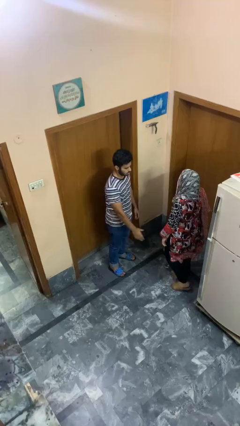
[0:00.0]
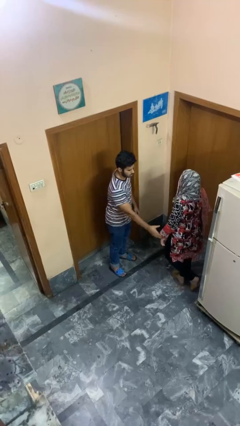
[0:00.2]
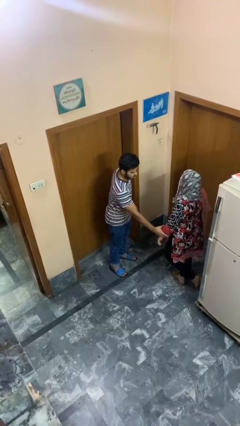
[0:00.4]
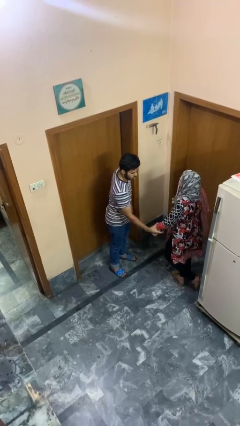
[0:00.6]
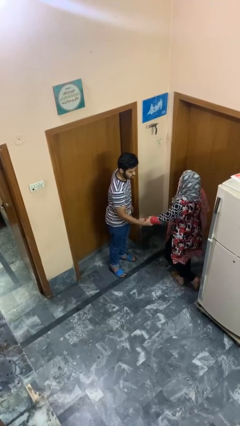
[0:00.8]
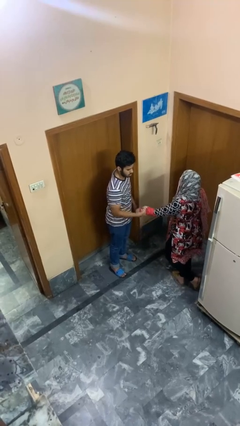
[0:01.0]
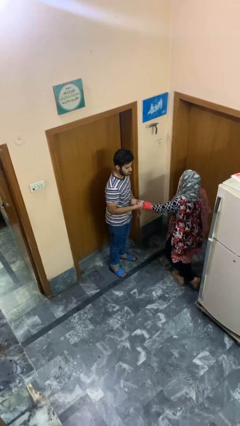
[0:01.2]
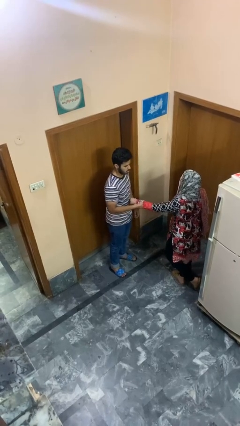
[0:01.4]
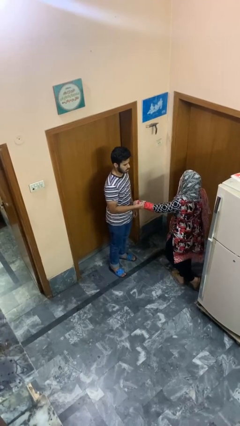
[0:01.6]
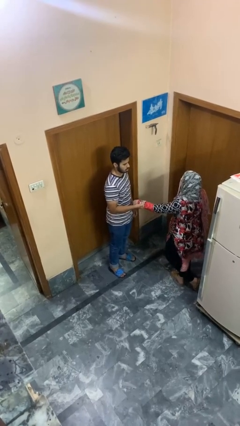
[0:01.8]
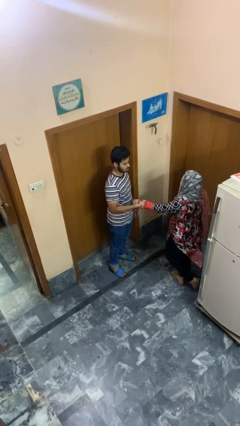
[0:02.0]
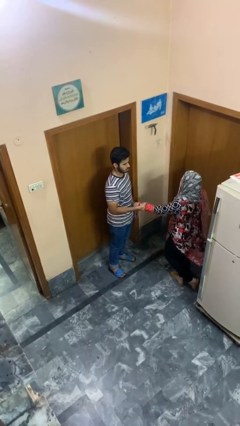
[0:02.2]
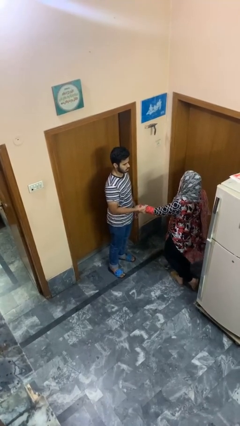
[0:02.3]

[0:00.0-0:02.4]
person grabs person by forearm

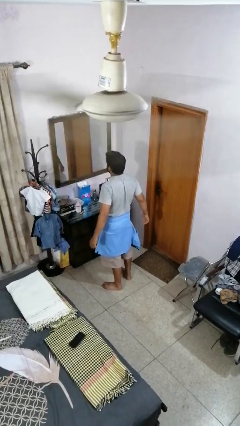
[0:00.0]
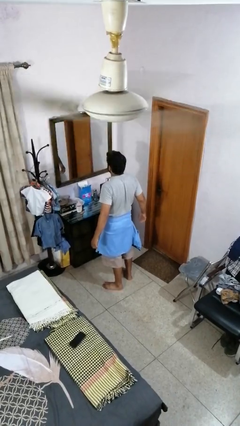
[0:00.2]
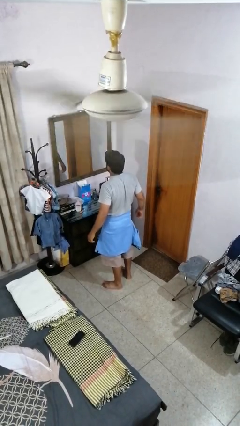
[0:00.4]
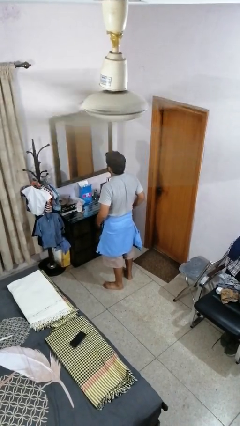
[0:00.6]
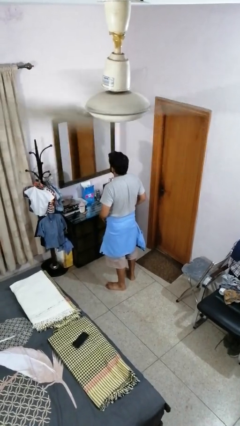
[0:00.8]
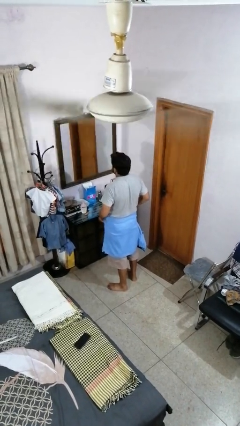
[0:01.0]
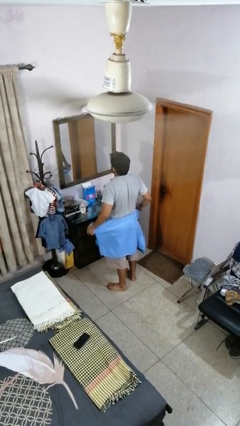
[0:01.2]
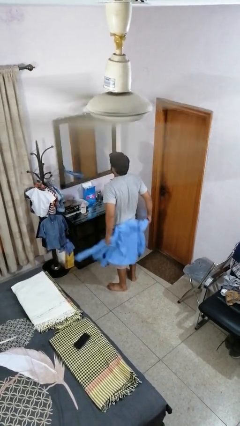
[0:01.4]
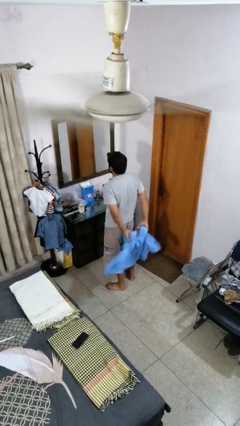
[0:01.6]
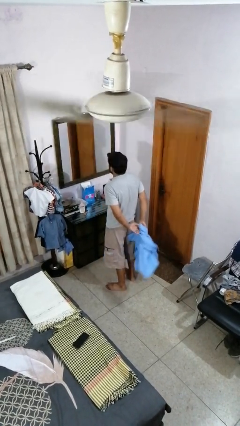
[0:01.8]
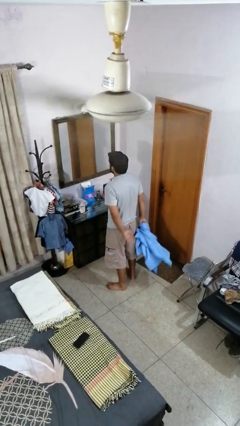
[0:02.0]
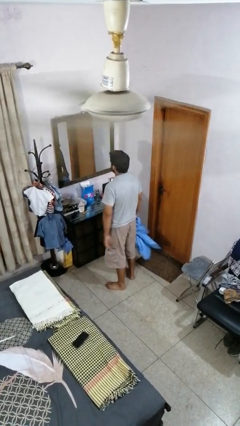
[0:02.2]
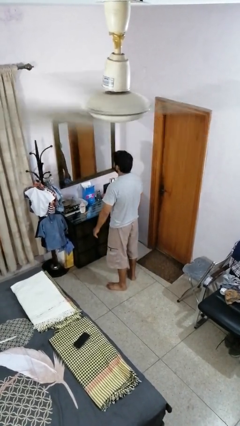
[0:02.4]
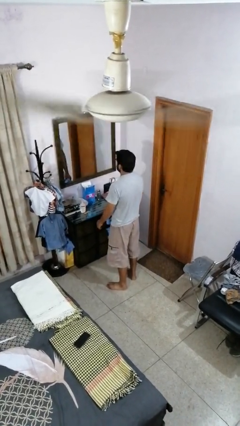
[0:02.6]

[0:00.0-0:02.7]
person unties jacket around waist

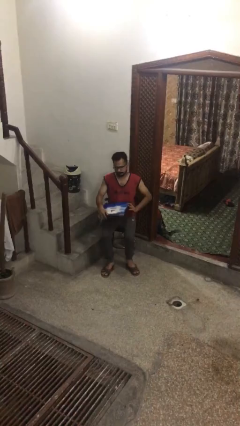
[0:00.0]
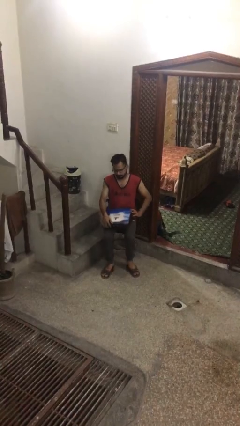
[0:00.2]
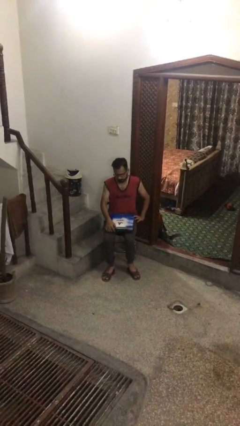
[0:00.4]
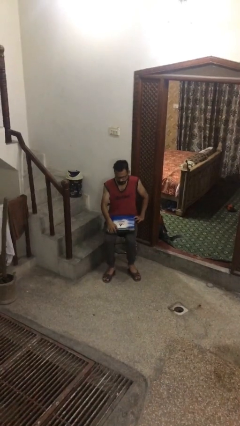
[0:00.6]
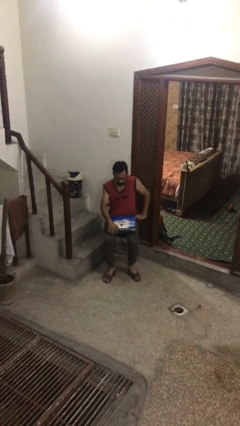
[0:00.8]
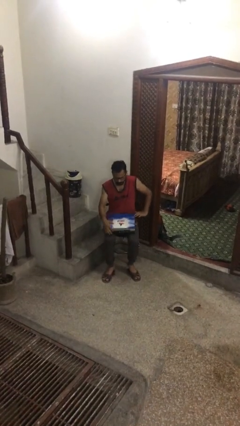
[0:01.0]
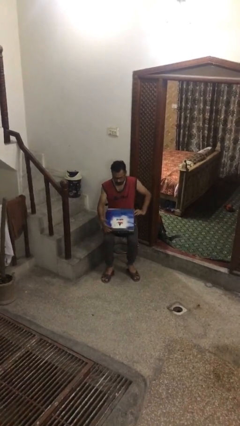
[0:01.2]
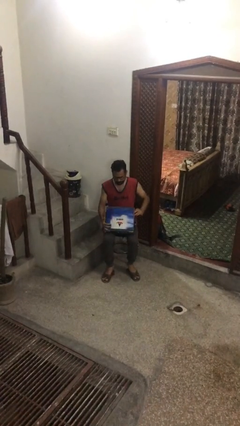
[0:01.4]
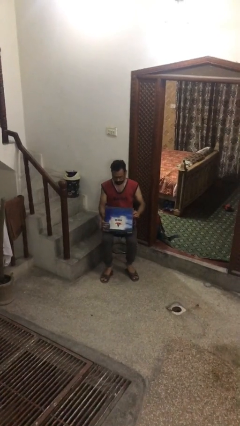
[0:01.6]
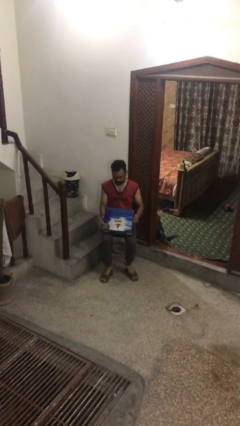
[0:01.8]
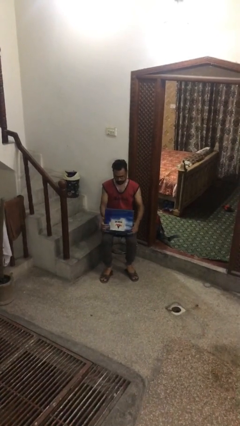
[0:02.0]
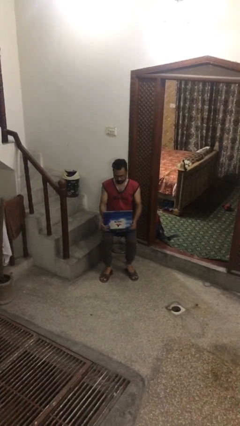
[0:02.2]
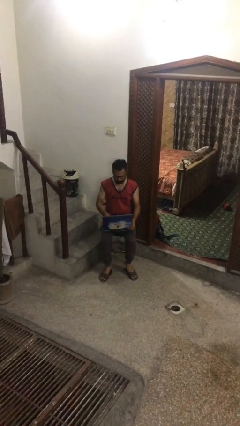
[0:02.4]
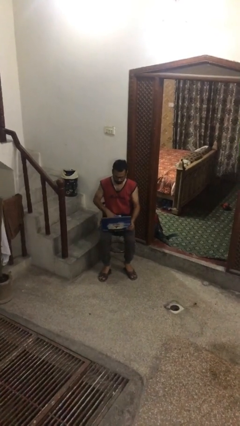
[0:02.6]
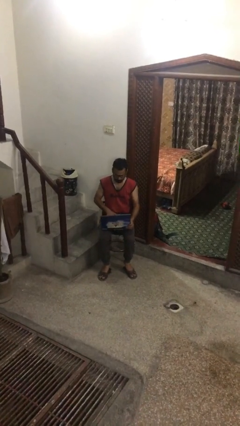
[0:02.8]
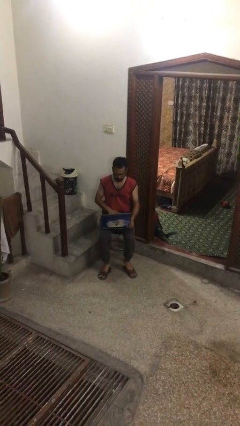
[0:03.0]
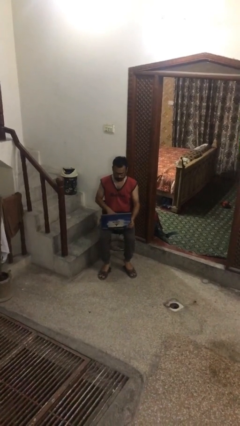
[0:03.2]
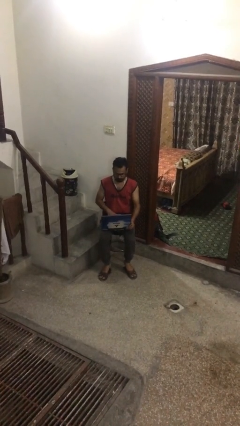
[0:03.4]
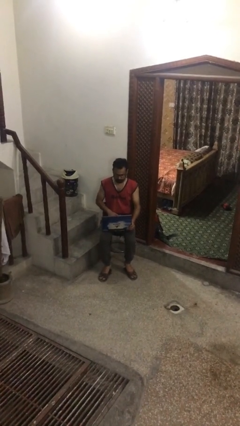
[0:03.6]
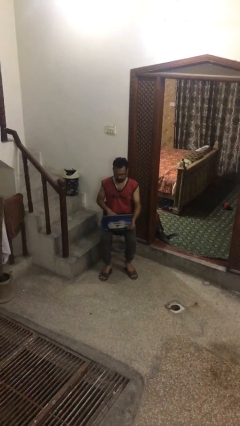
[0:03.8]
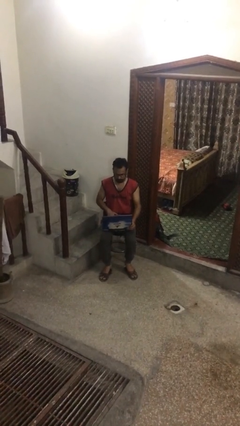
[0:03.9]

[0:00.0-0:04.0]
person interacts with laptop

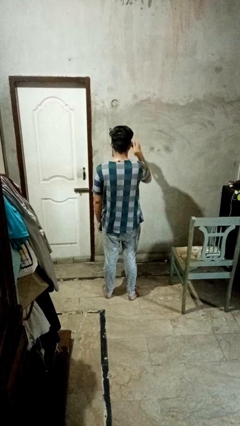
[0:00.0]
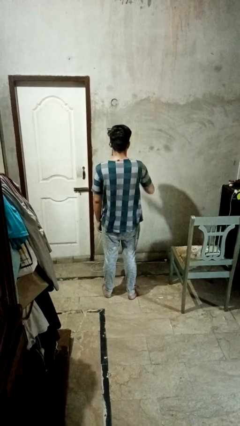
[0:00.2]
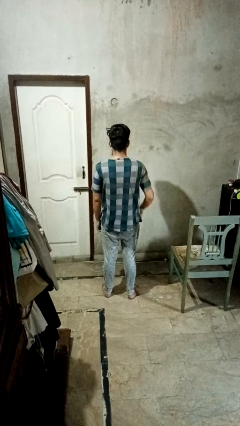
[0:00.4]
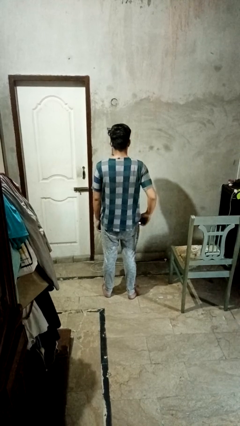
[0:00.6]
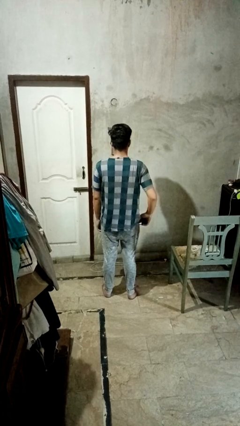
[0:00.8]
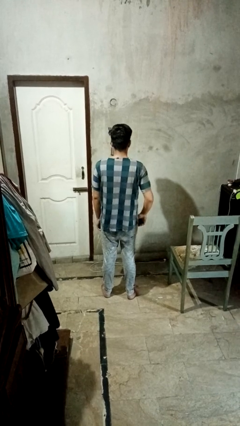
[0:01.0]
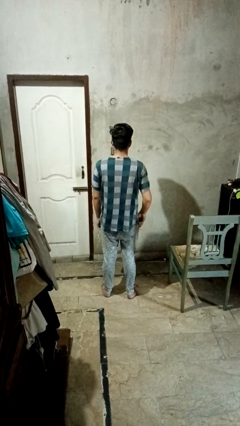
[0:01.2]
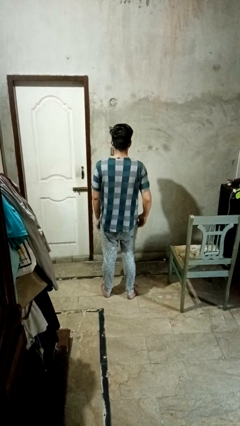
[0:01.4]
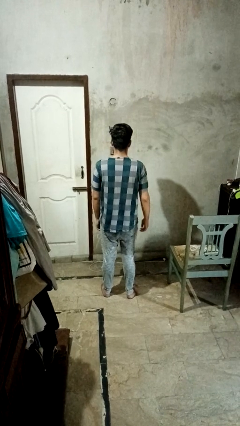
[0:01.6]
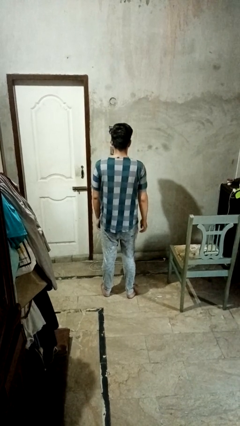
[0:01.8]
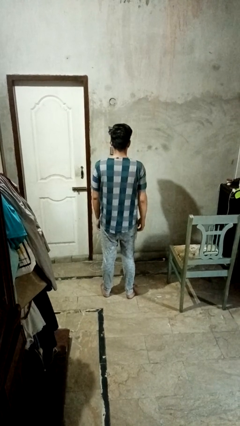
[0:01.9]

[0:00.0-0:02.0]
person puts phone into pocket

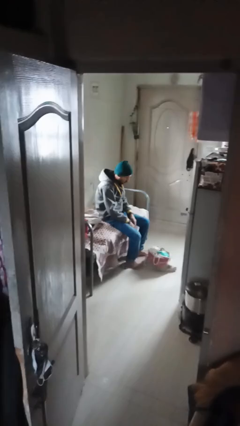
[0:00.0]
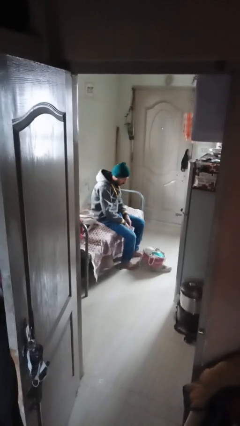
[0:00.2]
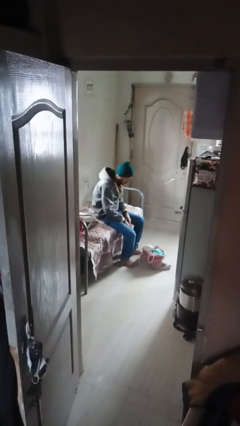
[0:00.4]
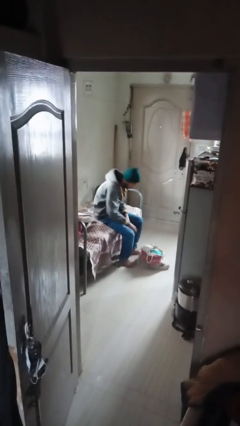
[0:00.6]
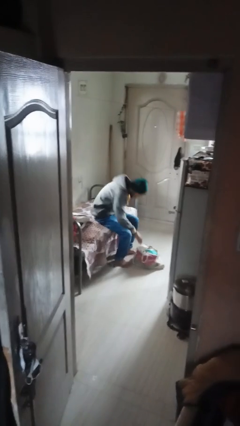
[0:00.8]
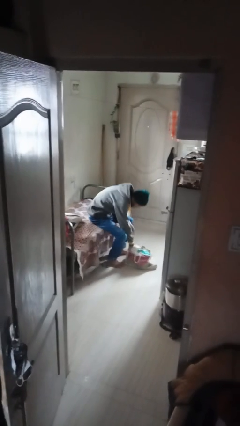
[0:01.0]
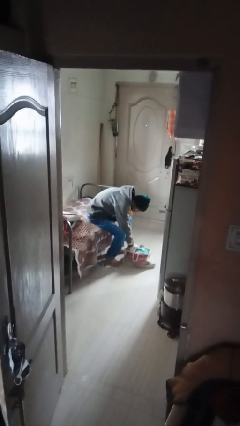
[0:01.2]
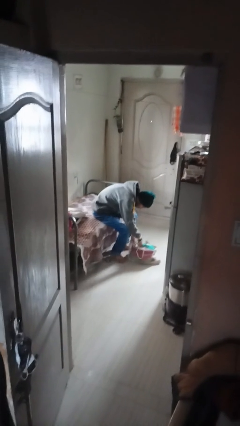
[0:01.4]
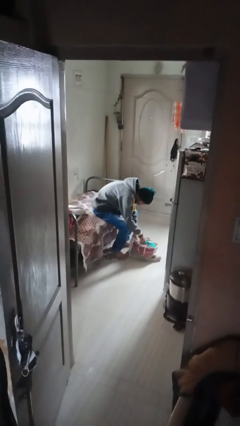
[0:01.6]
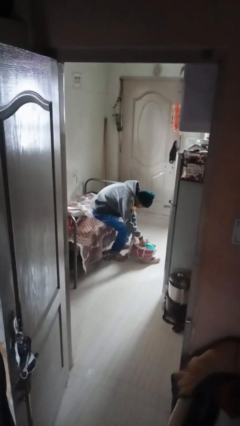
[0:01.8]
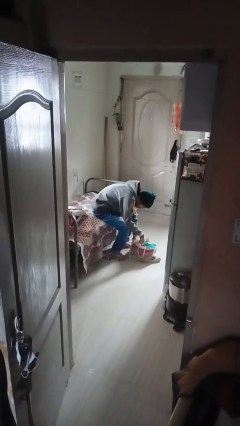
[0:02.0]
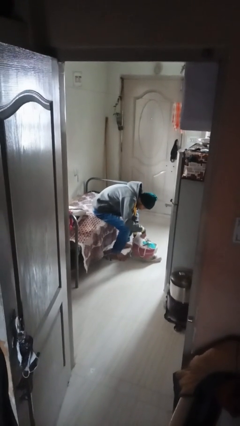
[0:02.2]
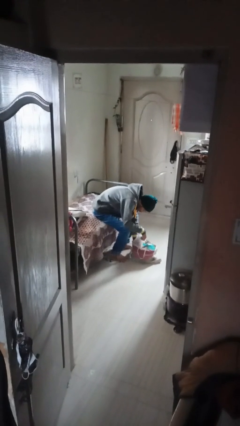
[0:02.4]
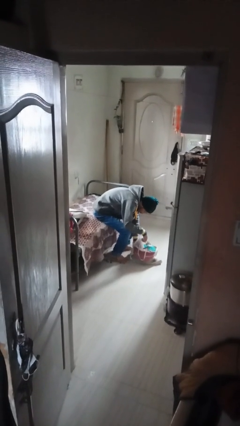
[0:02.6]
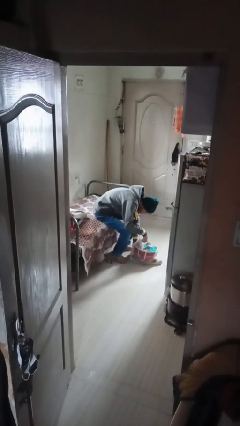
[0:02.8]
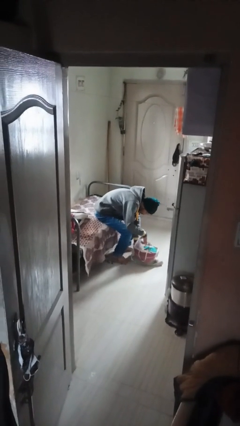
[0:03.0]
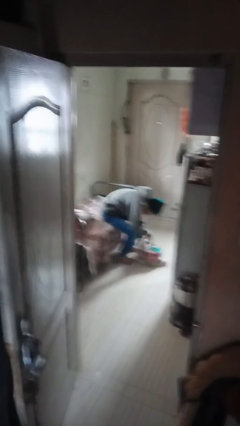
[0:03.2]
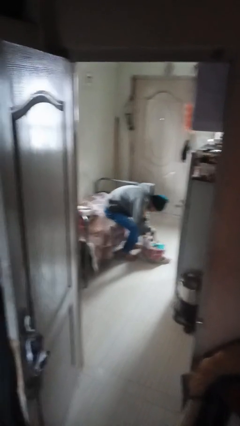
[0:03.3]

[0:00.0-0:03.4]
person searches in bag

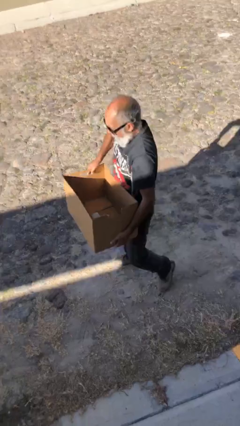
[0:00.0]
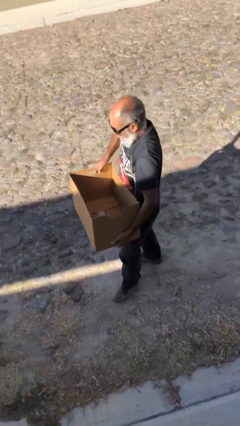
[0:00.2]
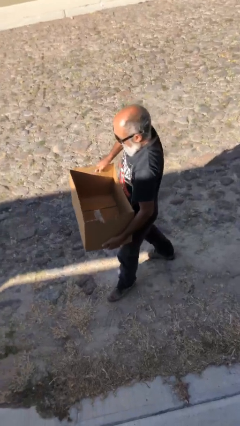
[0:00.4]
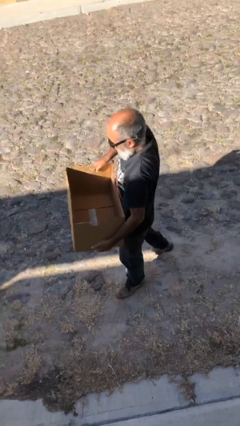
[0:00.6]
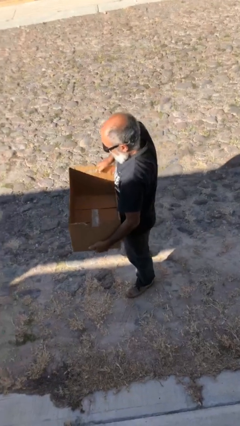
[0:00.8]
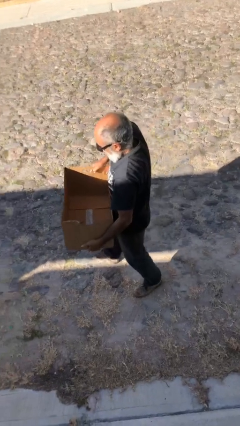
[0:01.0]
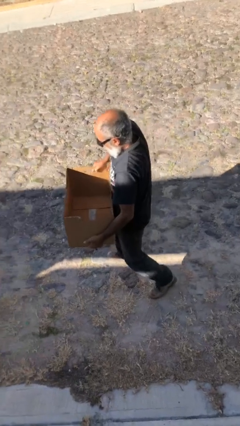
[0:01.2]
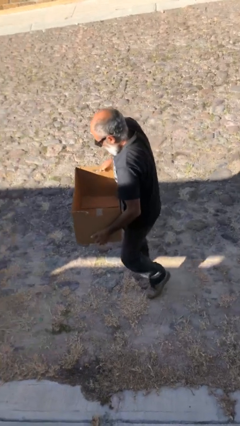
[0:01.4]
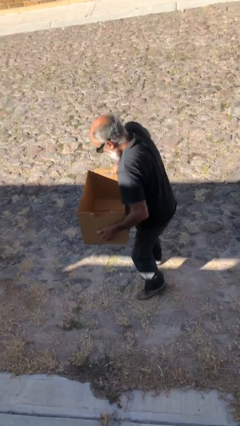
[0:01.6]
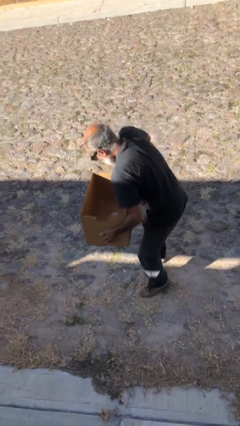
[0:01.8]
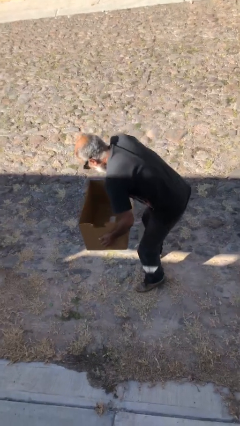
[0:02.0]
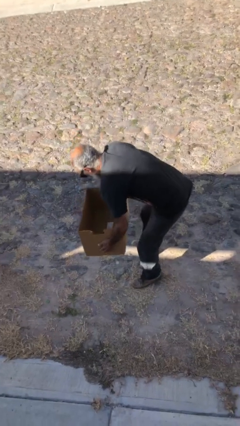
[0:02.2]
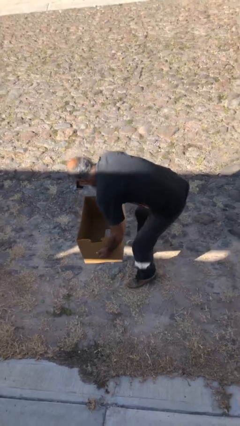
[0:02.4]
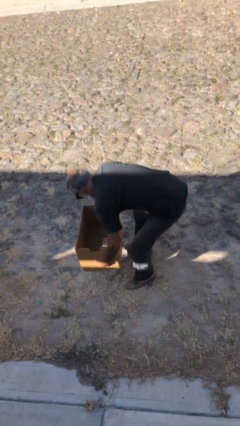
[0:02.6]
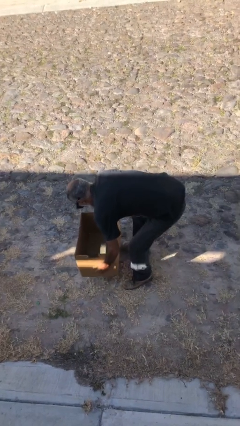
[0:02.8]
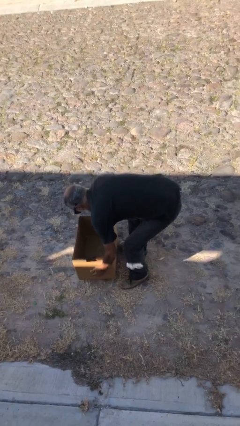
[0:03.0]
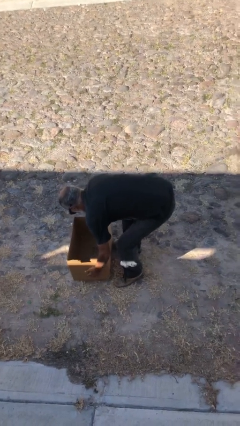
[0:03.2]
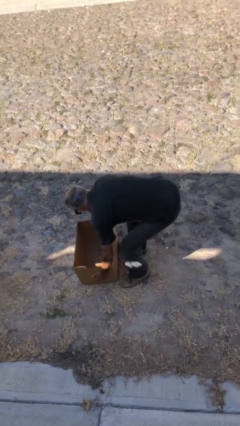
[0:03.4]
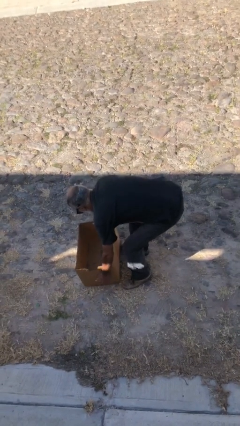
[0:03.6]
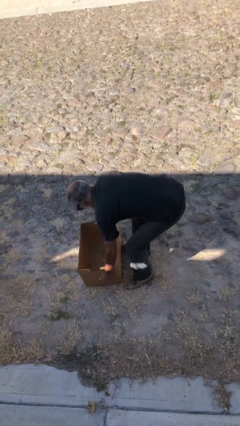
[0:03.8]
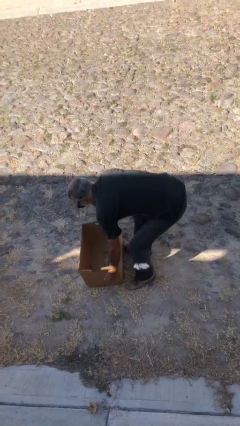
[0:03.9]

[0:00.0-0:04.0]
person puts down object on floor
